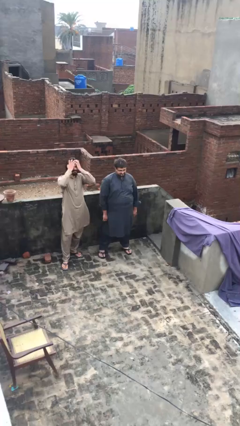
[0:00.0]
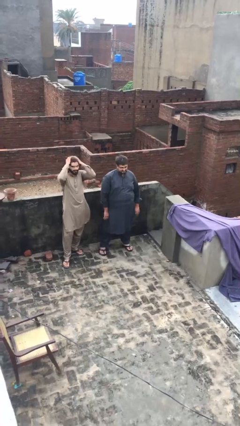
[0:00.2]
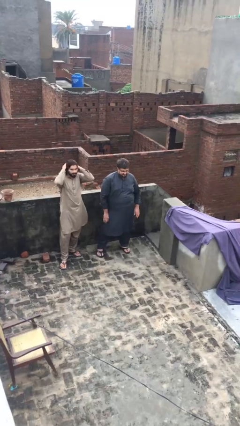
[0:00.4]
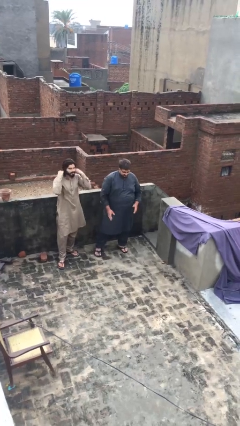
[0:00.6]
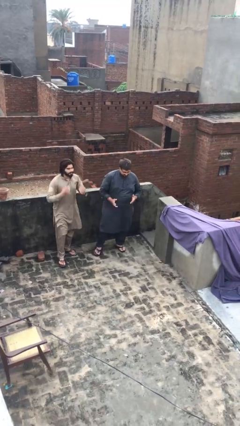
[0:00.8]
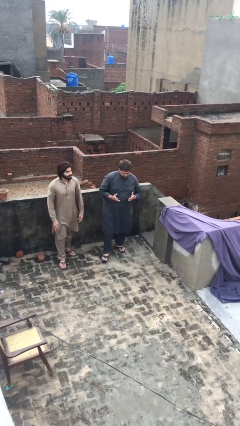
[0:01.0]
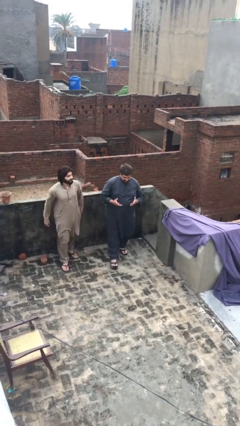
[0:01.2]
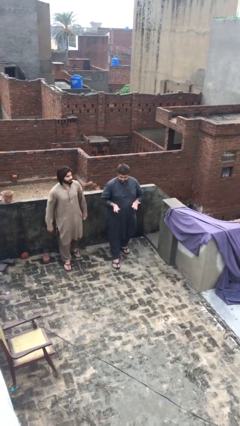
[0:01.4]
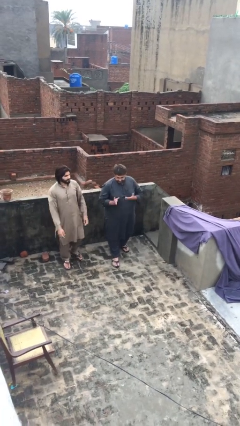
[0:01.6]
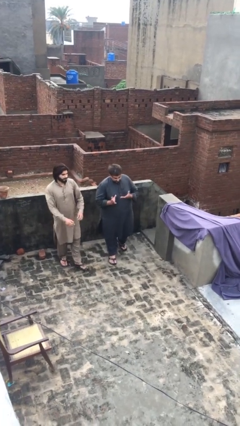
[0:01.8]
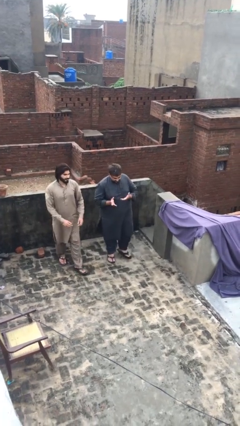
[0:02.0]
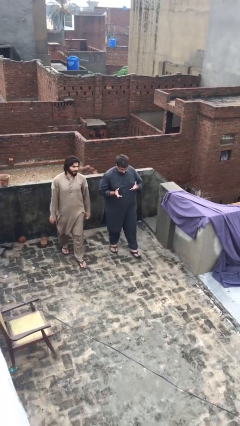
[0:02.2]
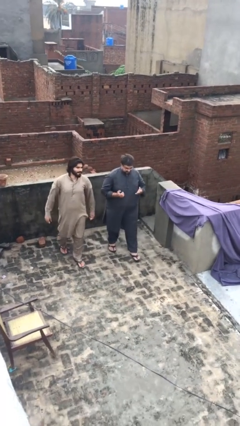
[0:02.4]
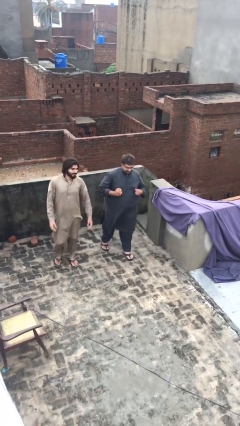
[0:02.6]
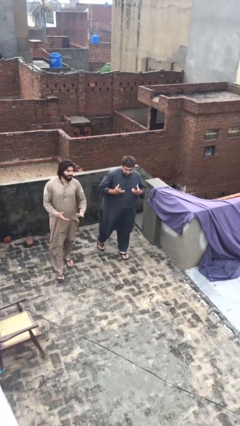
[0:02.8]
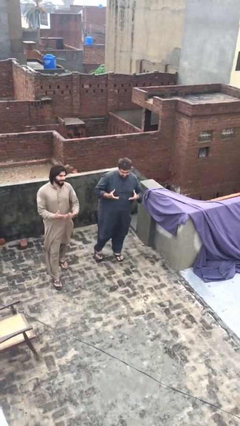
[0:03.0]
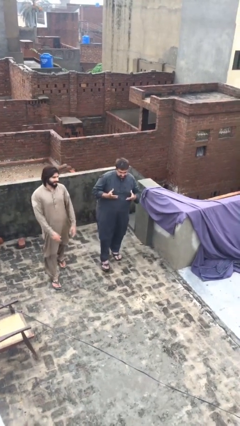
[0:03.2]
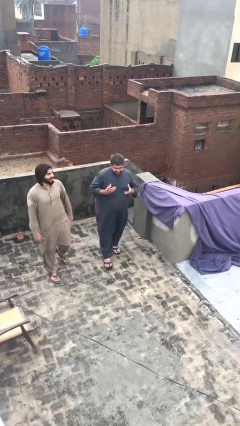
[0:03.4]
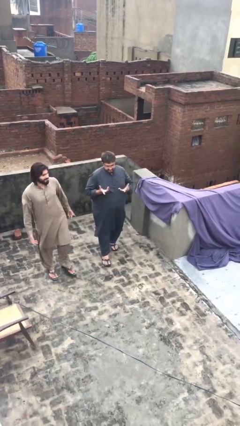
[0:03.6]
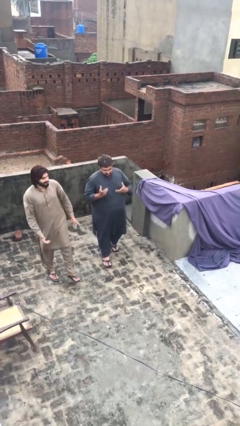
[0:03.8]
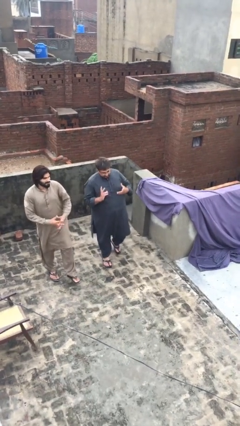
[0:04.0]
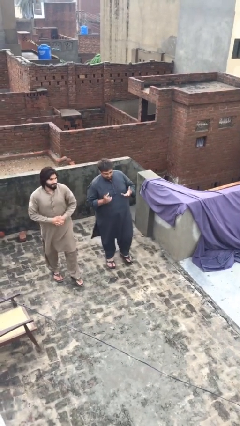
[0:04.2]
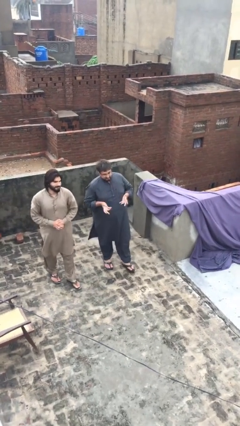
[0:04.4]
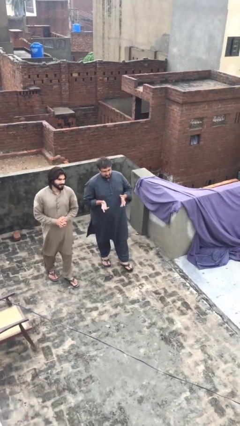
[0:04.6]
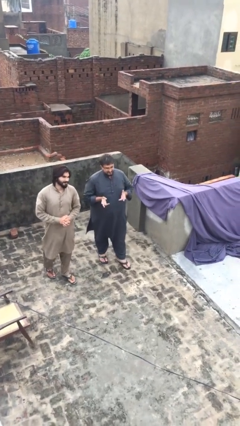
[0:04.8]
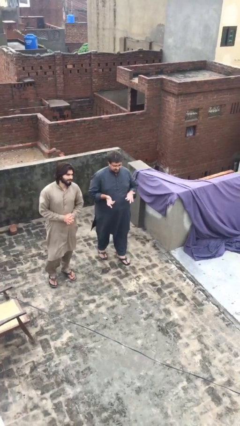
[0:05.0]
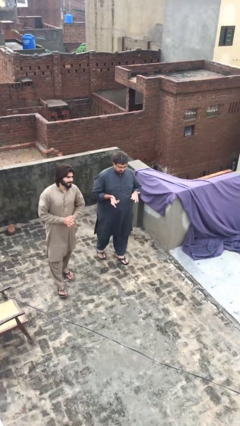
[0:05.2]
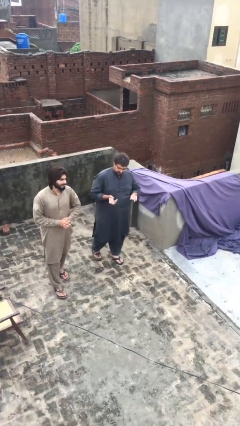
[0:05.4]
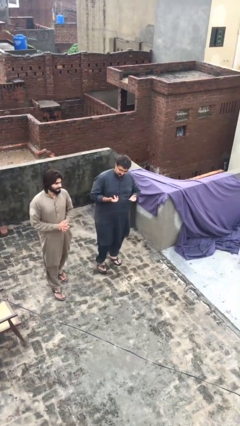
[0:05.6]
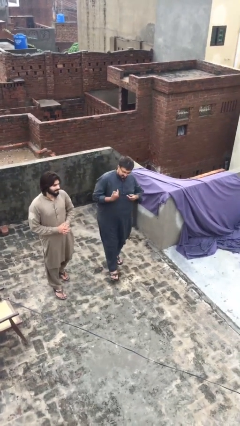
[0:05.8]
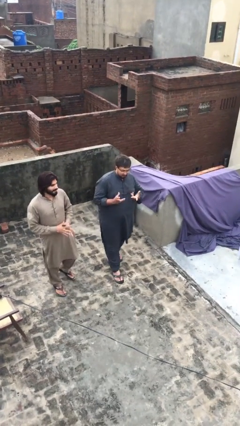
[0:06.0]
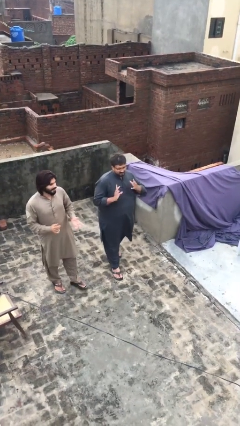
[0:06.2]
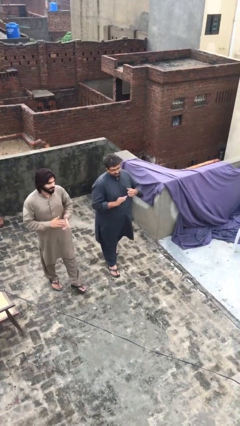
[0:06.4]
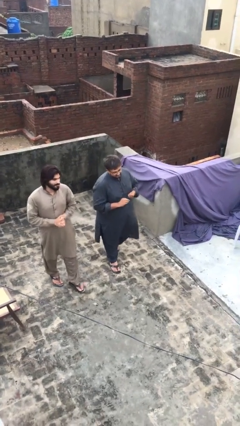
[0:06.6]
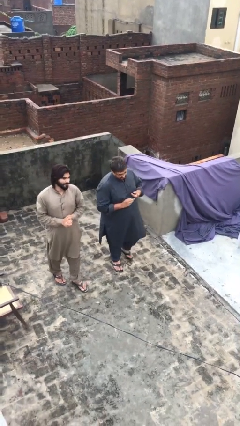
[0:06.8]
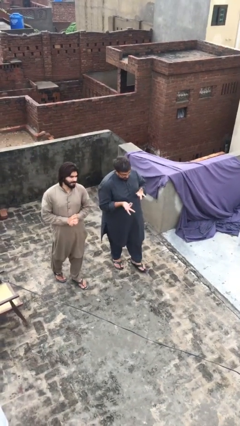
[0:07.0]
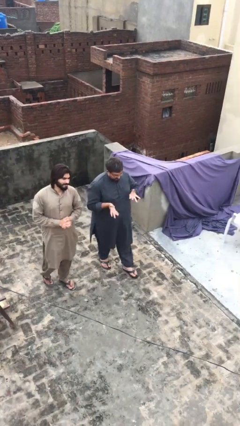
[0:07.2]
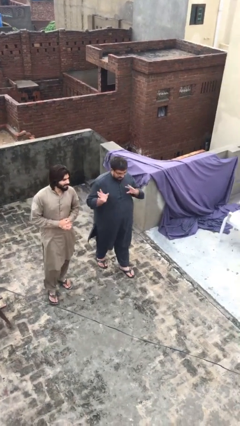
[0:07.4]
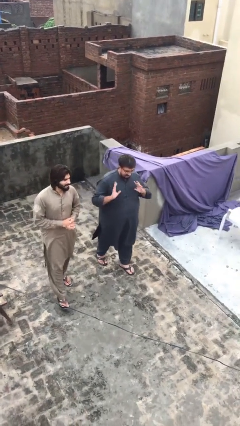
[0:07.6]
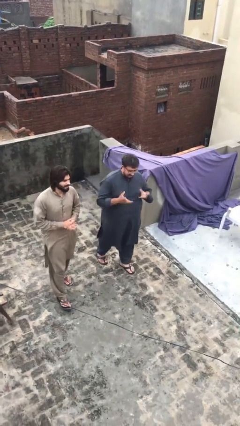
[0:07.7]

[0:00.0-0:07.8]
person talks to person

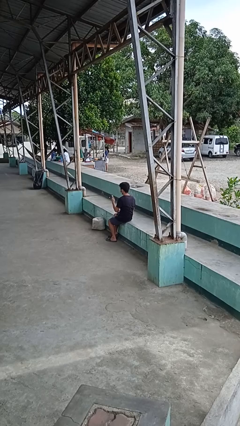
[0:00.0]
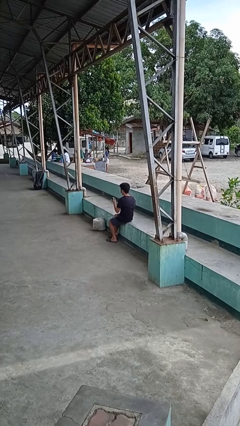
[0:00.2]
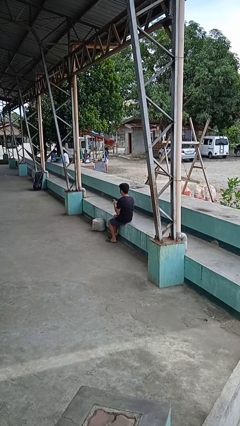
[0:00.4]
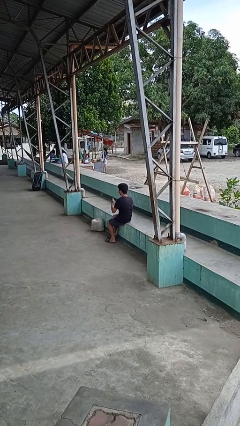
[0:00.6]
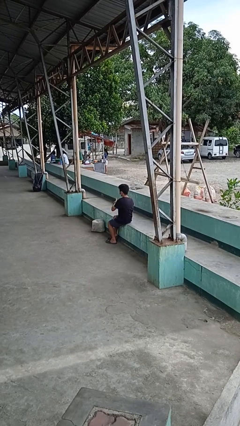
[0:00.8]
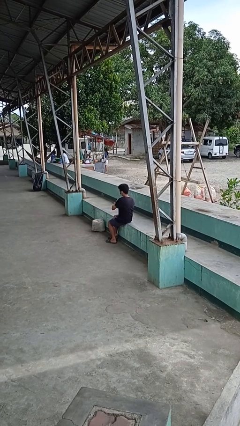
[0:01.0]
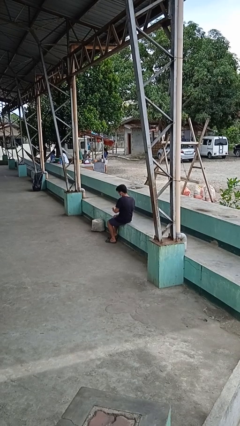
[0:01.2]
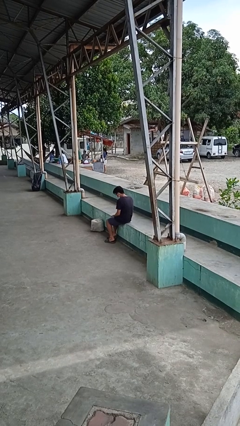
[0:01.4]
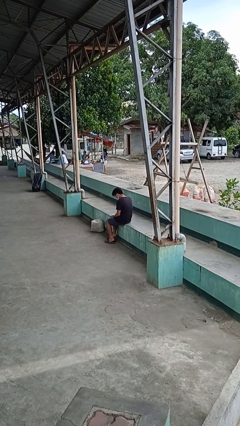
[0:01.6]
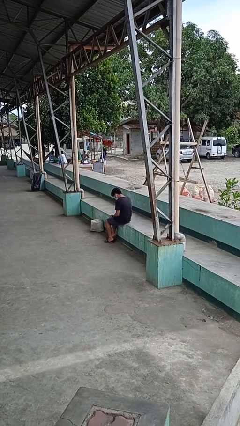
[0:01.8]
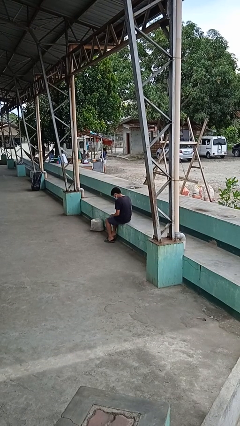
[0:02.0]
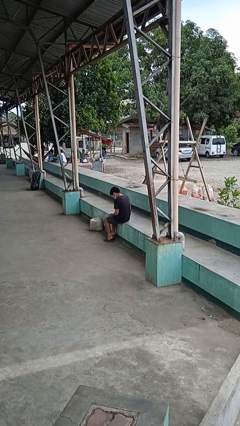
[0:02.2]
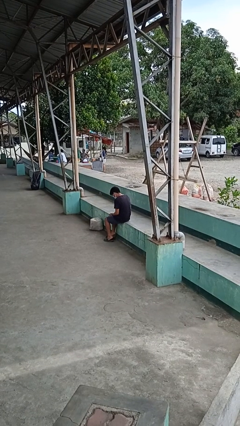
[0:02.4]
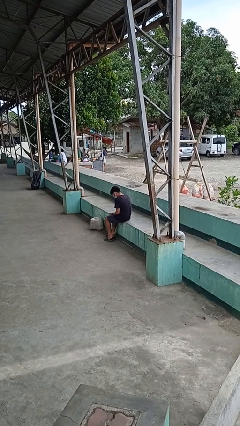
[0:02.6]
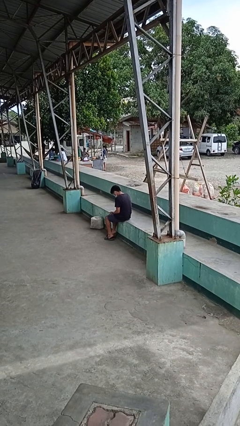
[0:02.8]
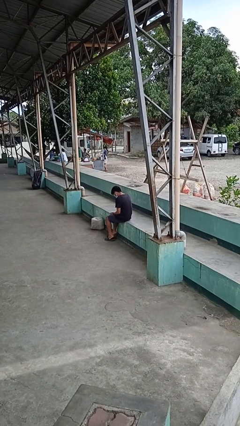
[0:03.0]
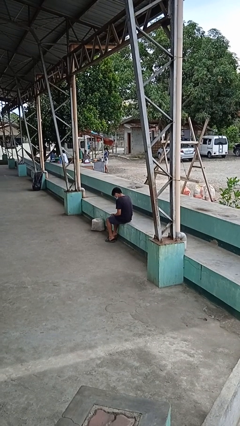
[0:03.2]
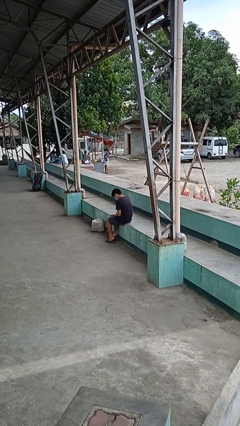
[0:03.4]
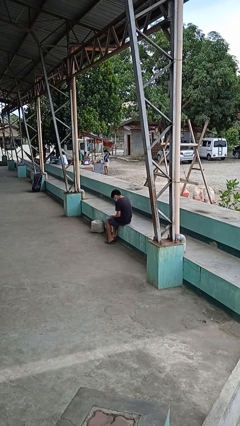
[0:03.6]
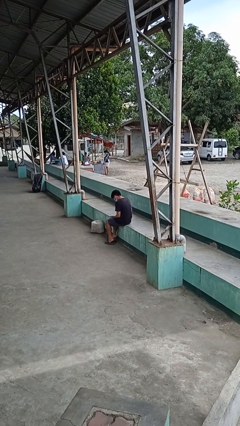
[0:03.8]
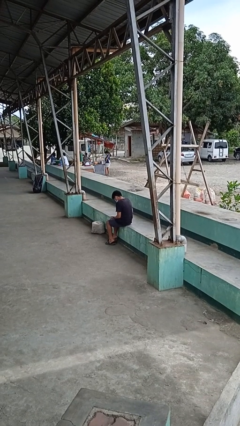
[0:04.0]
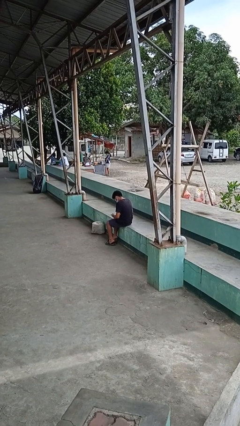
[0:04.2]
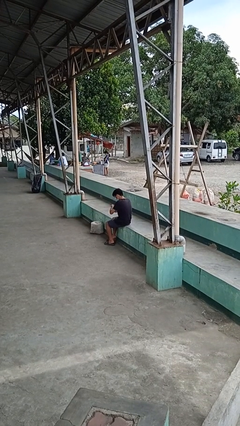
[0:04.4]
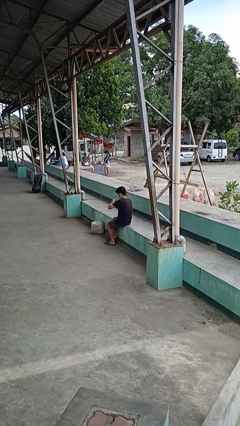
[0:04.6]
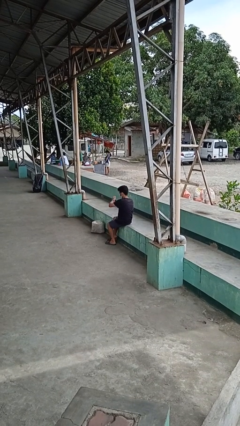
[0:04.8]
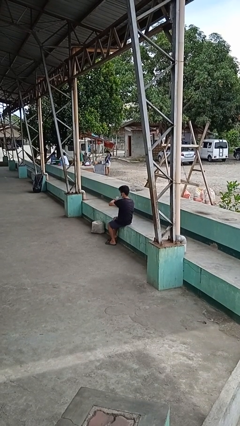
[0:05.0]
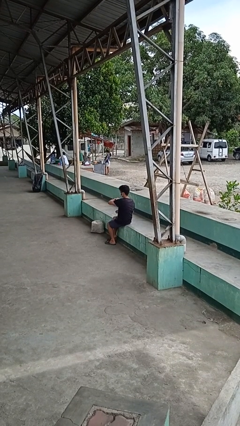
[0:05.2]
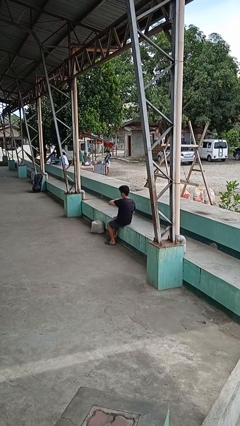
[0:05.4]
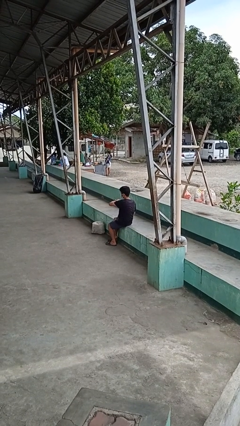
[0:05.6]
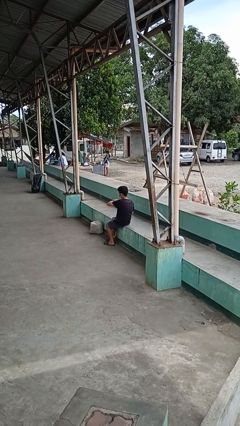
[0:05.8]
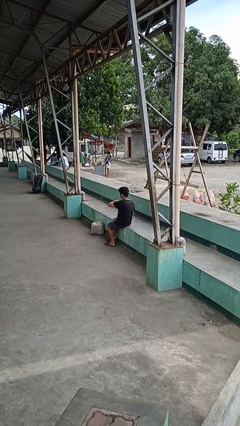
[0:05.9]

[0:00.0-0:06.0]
person puts on wristwatch

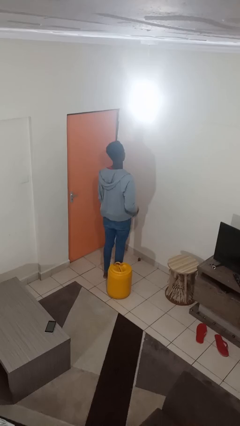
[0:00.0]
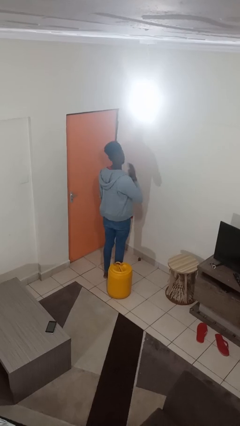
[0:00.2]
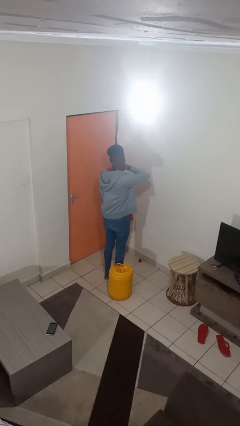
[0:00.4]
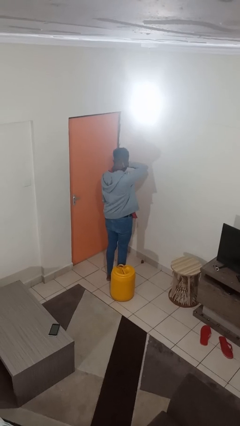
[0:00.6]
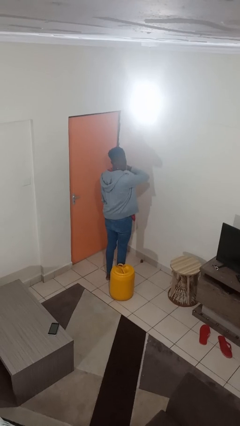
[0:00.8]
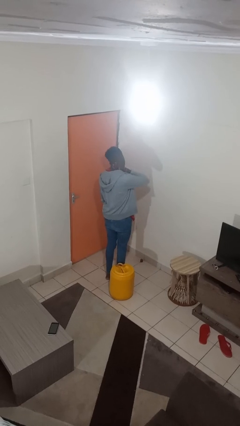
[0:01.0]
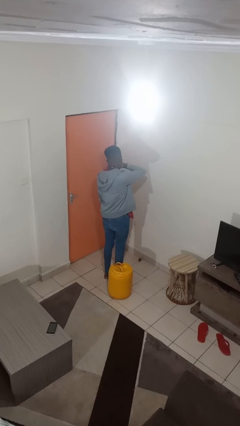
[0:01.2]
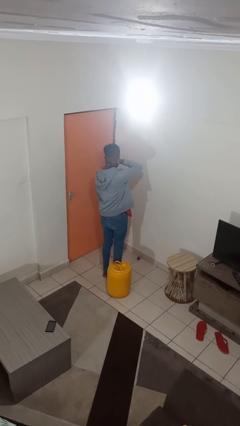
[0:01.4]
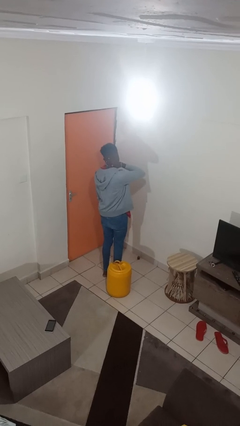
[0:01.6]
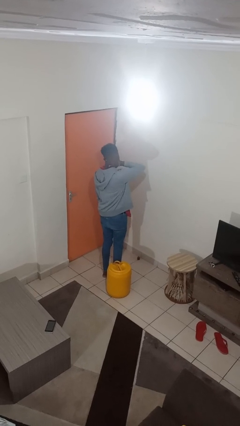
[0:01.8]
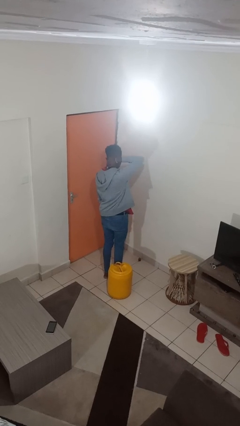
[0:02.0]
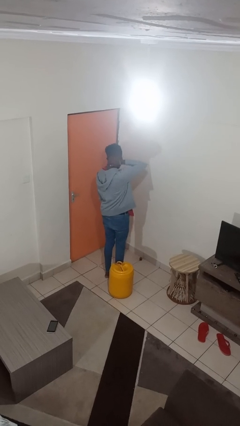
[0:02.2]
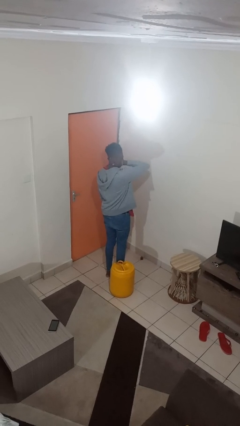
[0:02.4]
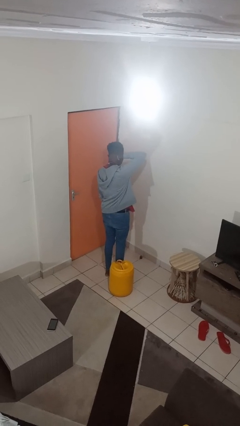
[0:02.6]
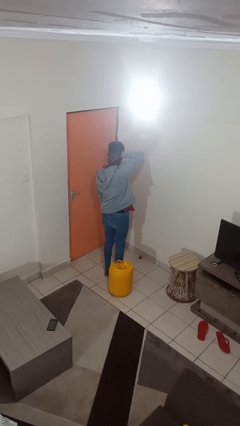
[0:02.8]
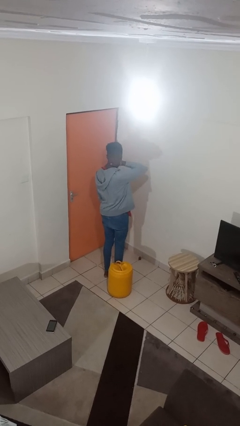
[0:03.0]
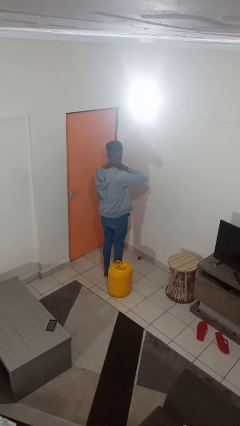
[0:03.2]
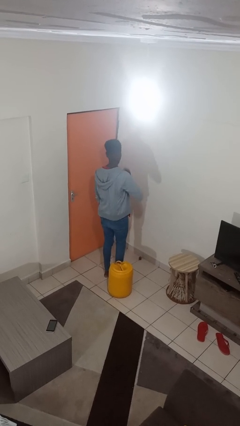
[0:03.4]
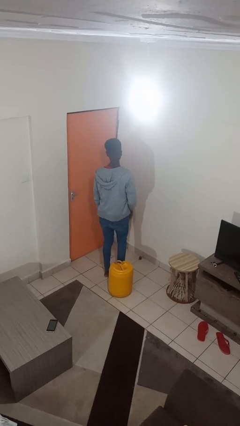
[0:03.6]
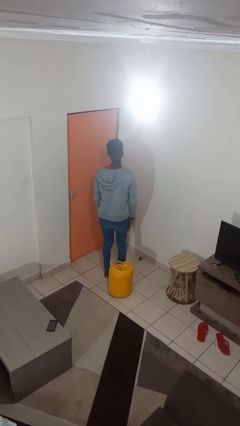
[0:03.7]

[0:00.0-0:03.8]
person rubs neck

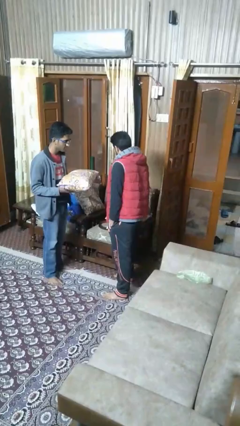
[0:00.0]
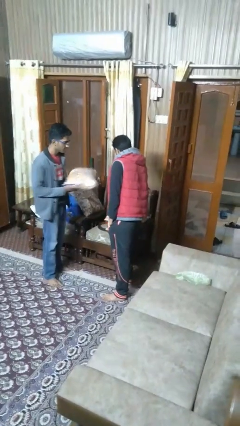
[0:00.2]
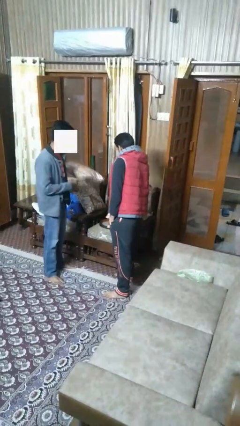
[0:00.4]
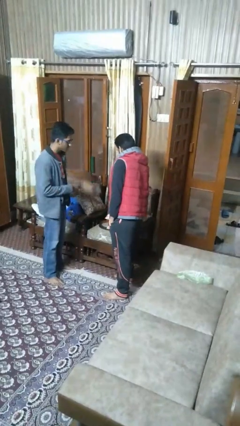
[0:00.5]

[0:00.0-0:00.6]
person transfers object to person
